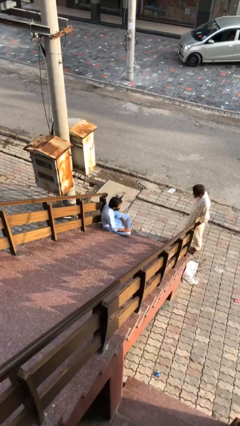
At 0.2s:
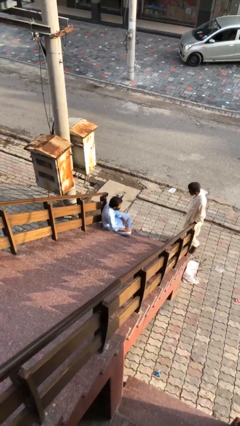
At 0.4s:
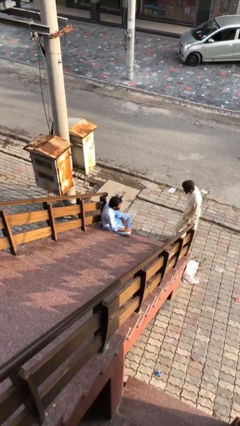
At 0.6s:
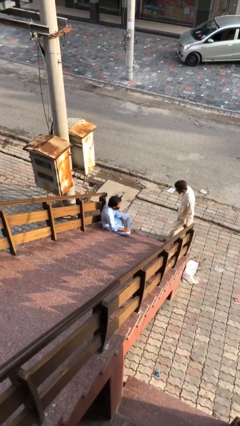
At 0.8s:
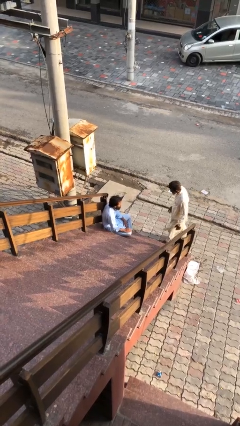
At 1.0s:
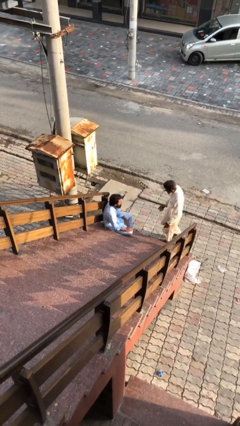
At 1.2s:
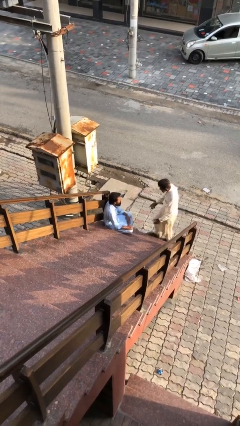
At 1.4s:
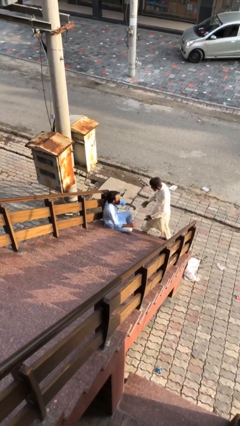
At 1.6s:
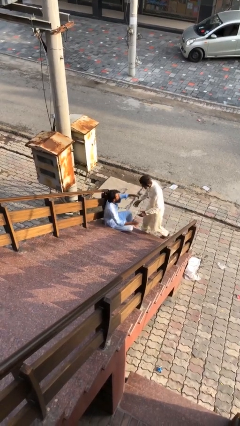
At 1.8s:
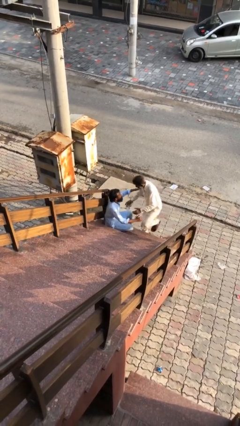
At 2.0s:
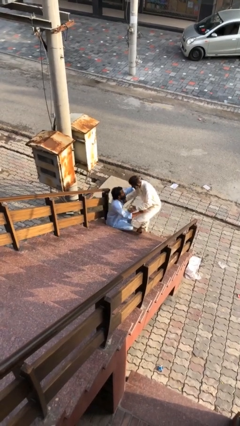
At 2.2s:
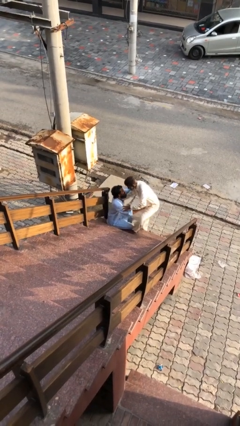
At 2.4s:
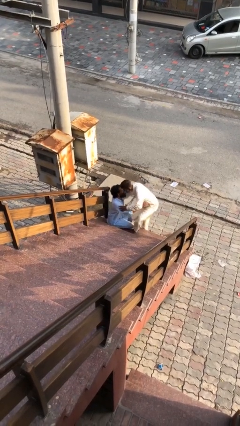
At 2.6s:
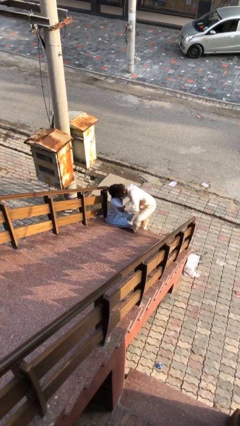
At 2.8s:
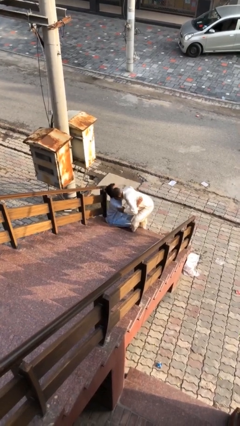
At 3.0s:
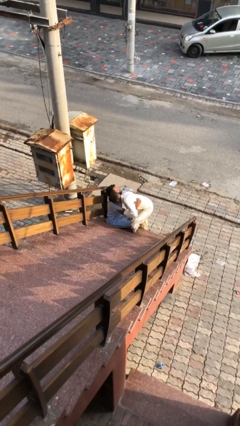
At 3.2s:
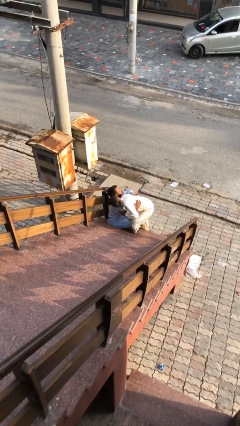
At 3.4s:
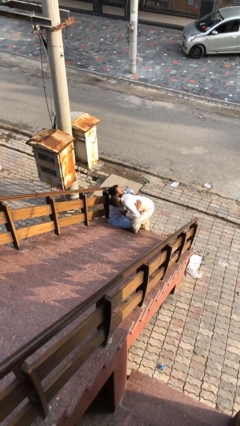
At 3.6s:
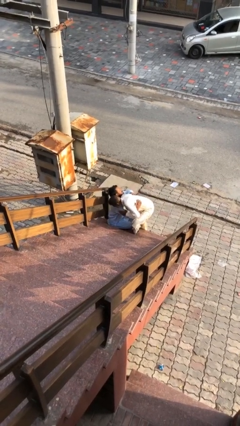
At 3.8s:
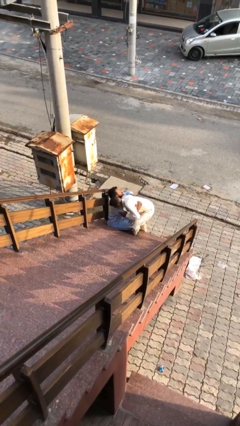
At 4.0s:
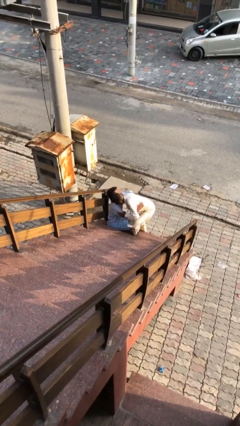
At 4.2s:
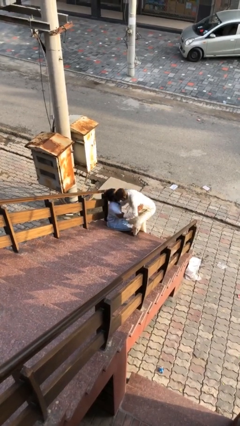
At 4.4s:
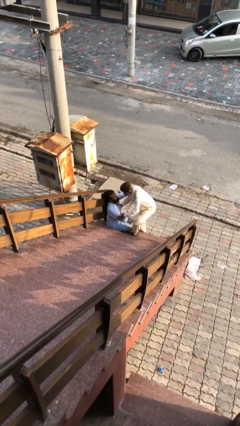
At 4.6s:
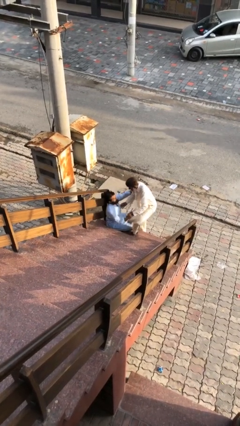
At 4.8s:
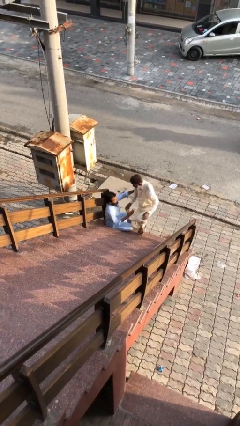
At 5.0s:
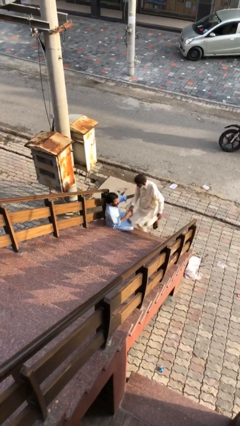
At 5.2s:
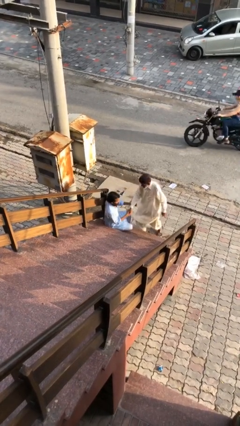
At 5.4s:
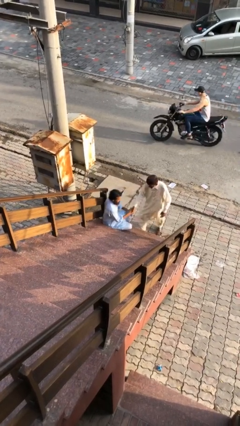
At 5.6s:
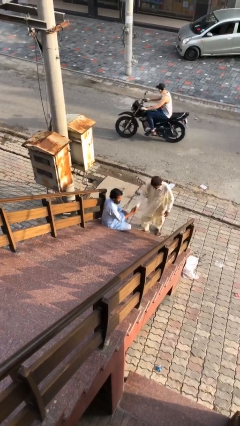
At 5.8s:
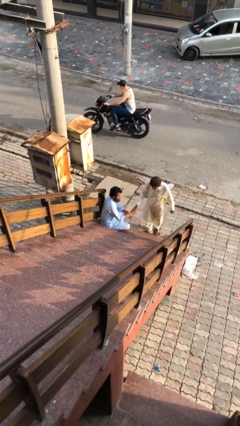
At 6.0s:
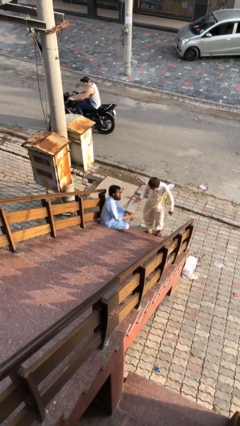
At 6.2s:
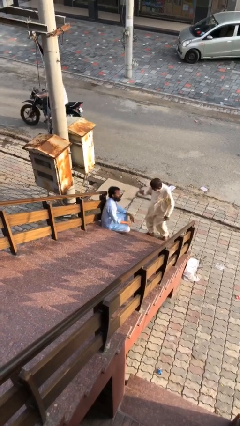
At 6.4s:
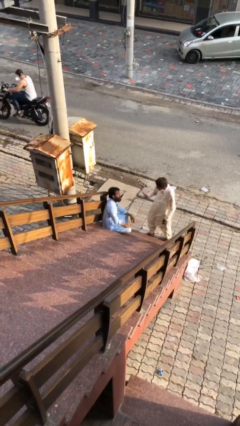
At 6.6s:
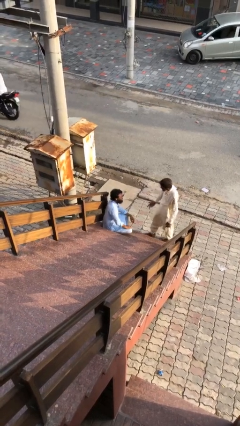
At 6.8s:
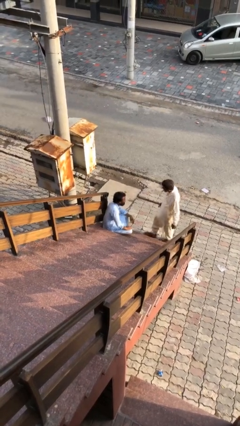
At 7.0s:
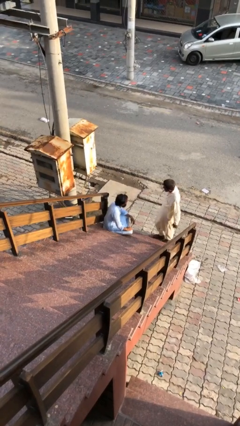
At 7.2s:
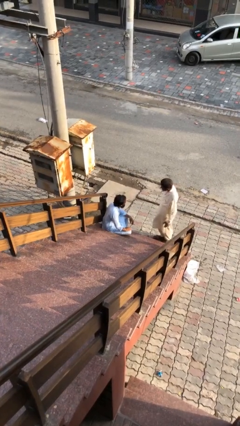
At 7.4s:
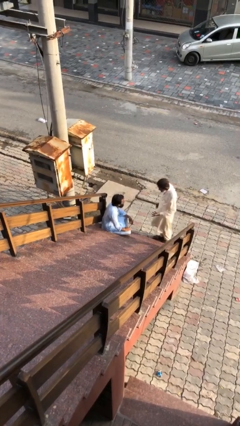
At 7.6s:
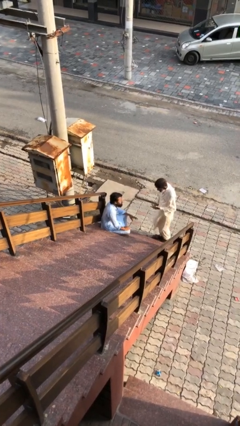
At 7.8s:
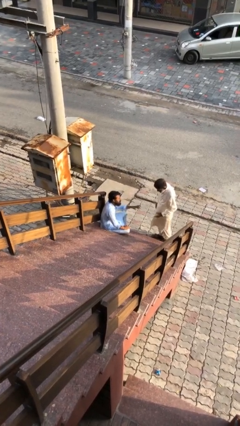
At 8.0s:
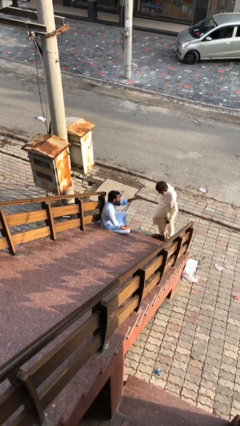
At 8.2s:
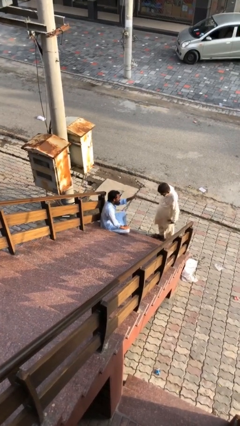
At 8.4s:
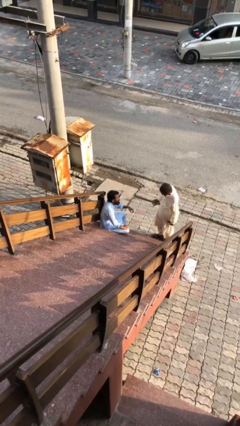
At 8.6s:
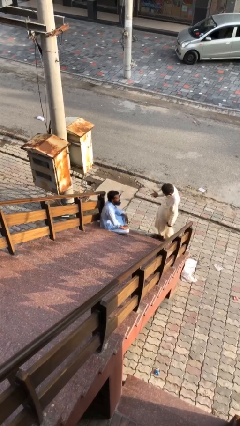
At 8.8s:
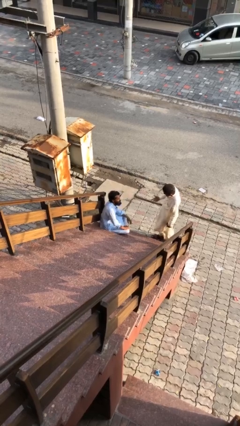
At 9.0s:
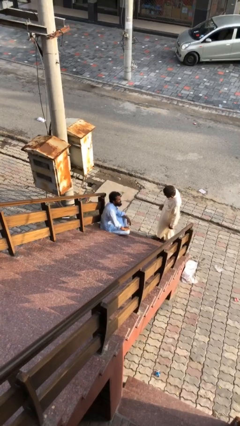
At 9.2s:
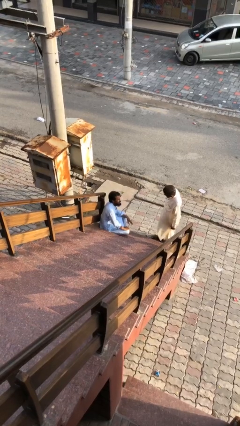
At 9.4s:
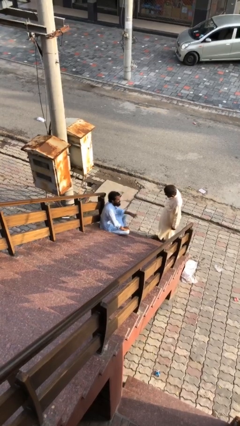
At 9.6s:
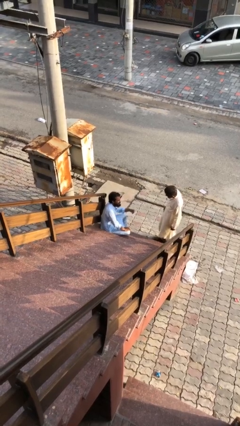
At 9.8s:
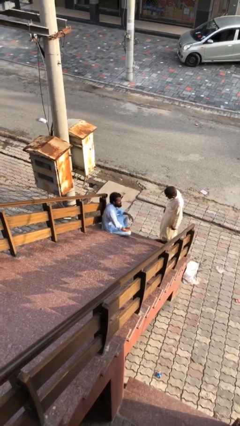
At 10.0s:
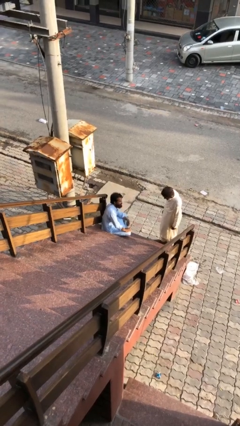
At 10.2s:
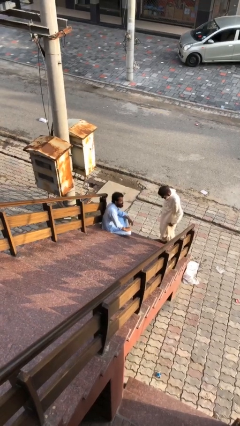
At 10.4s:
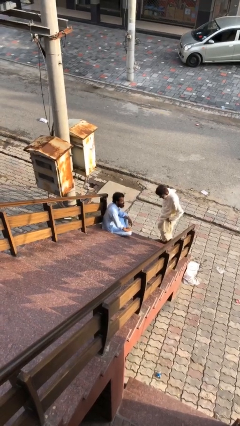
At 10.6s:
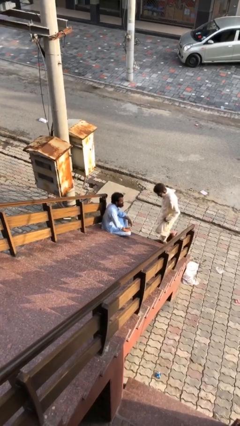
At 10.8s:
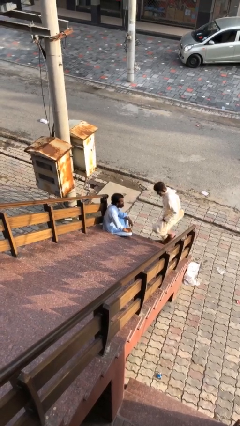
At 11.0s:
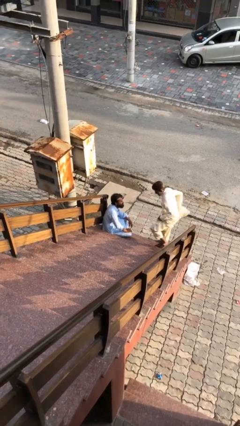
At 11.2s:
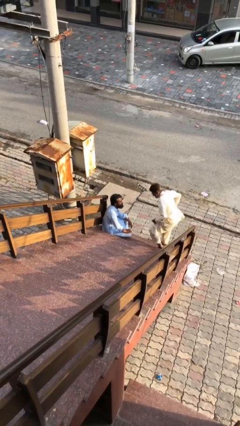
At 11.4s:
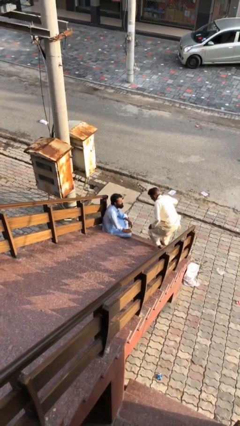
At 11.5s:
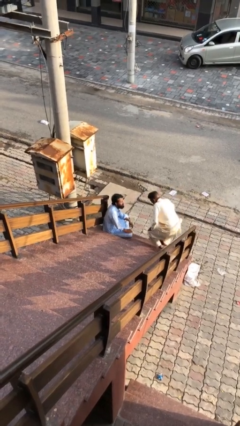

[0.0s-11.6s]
person embraces person

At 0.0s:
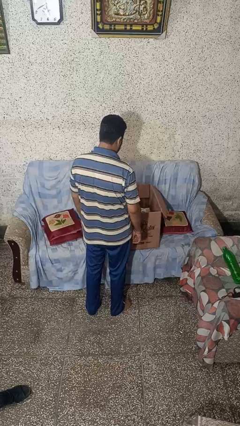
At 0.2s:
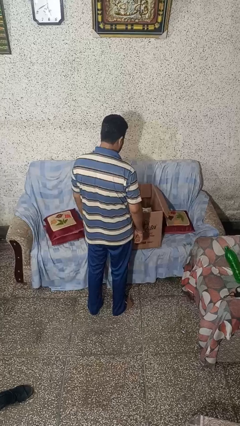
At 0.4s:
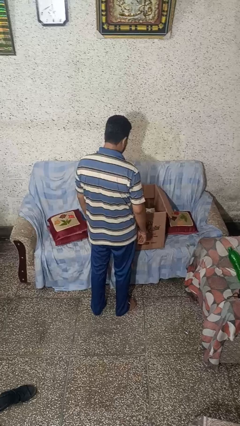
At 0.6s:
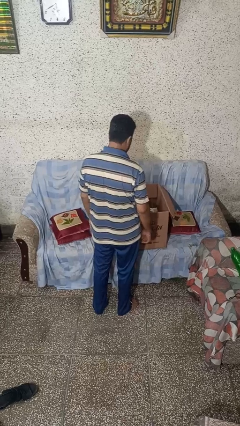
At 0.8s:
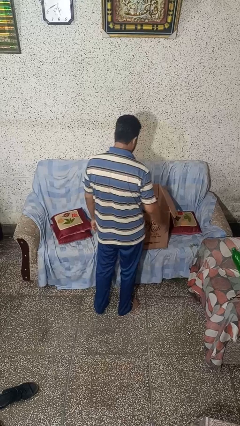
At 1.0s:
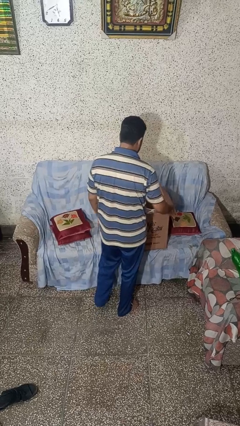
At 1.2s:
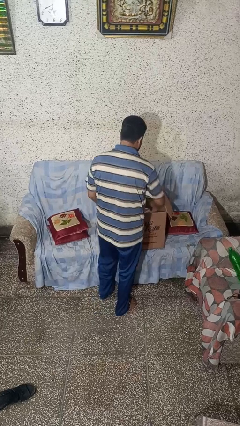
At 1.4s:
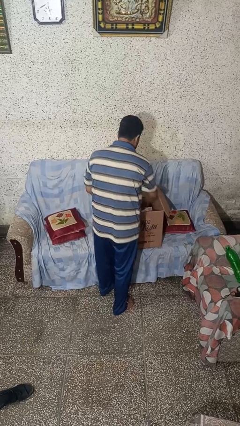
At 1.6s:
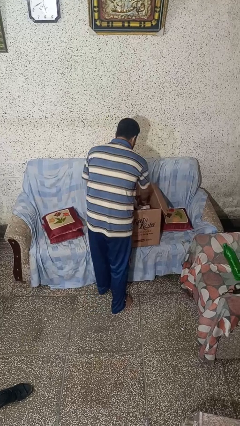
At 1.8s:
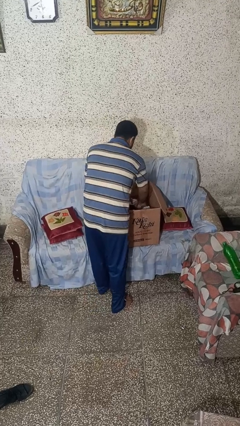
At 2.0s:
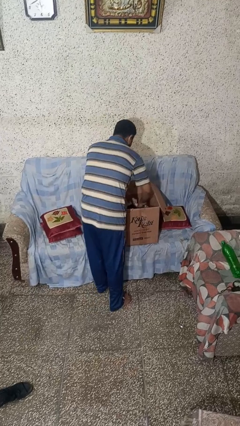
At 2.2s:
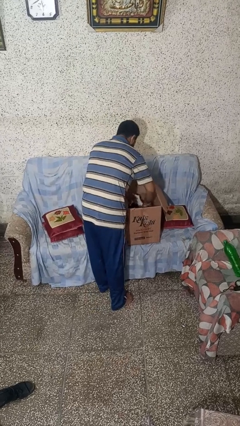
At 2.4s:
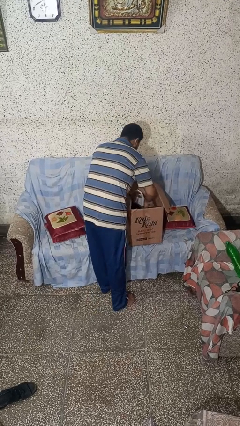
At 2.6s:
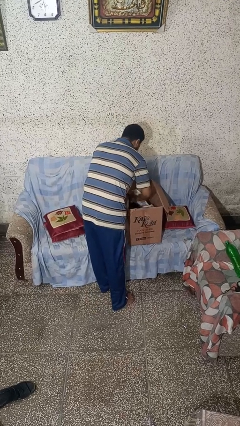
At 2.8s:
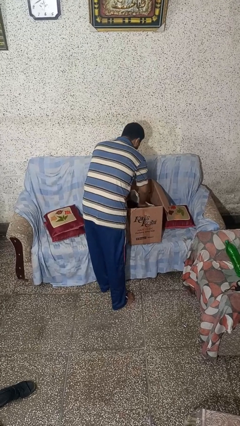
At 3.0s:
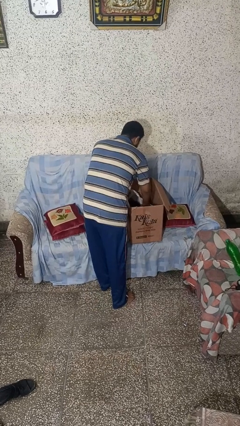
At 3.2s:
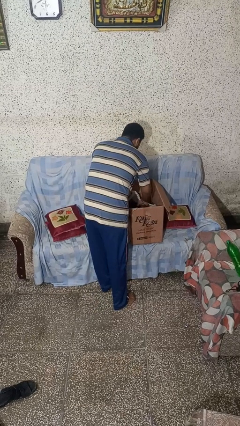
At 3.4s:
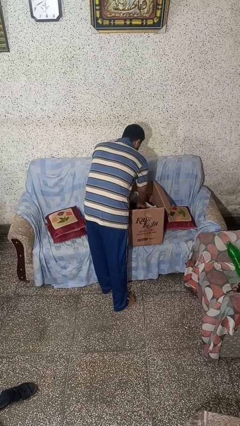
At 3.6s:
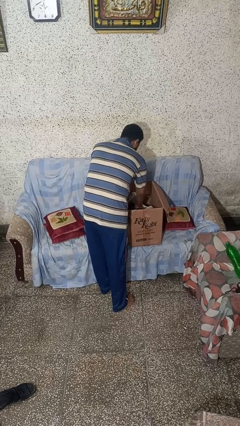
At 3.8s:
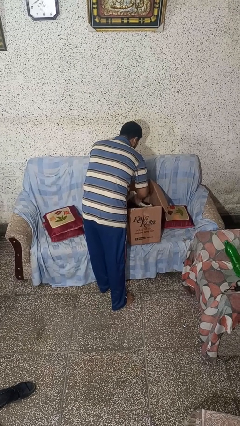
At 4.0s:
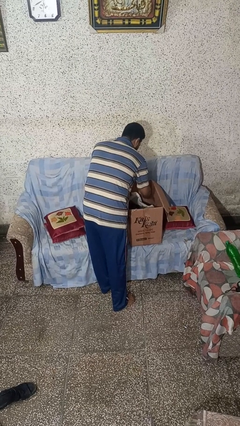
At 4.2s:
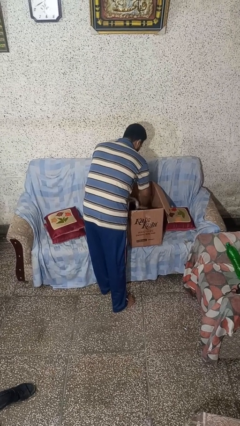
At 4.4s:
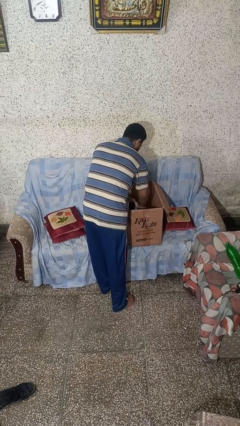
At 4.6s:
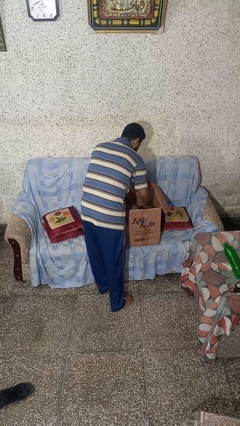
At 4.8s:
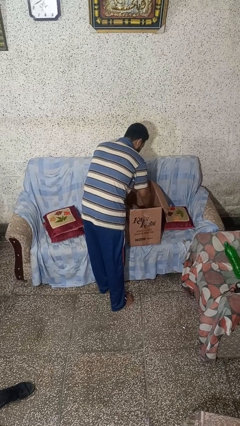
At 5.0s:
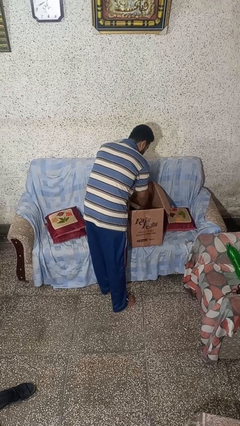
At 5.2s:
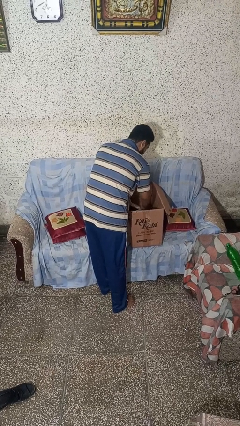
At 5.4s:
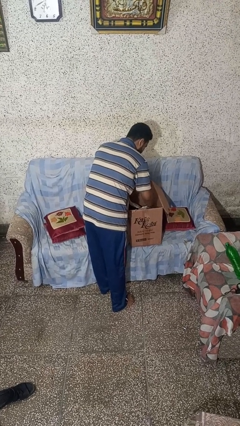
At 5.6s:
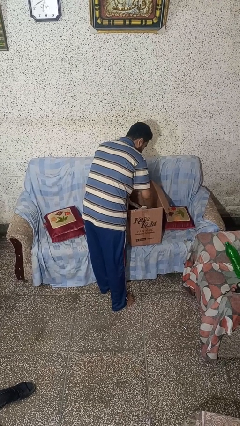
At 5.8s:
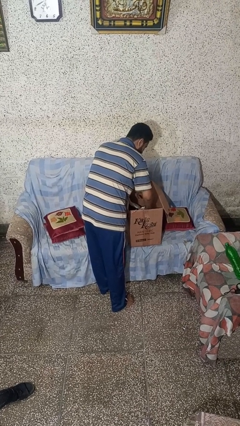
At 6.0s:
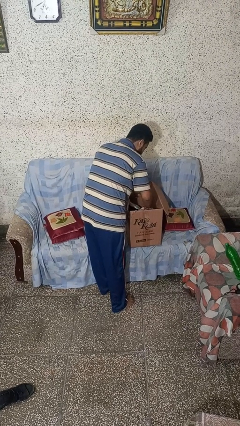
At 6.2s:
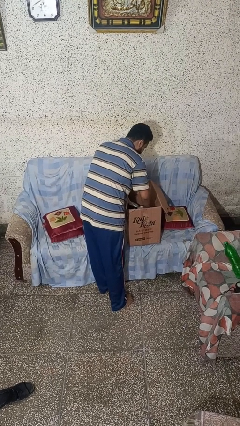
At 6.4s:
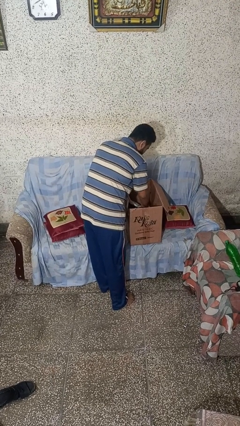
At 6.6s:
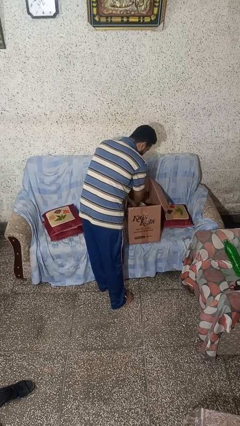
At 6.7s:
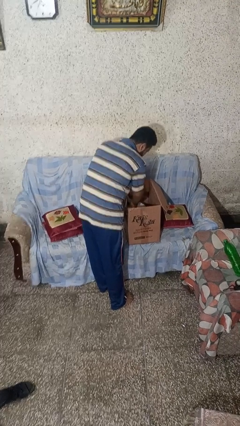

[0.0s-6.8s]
person searches in box
